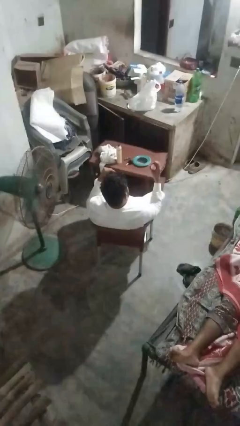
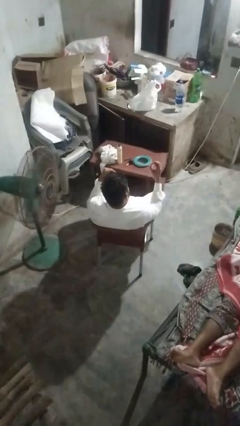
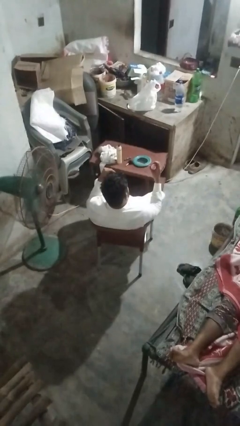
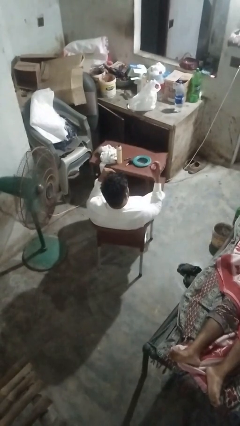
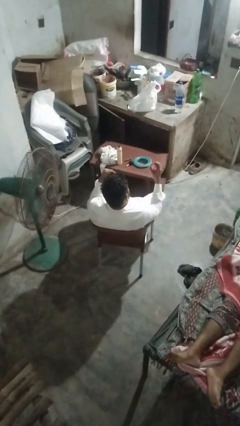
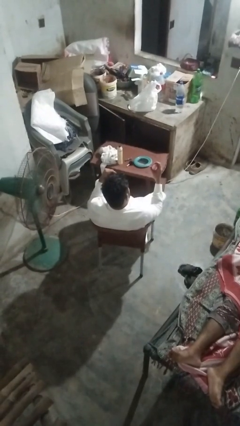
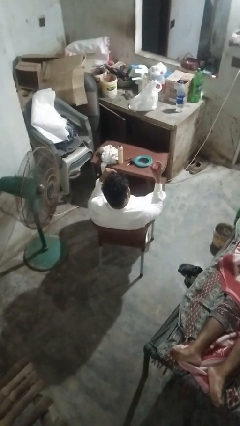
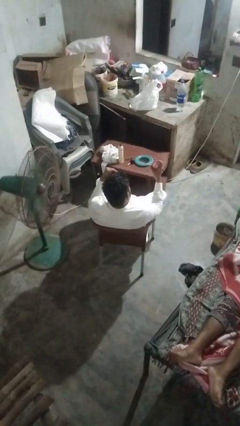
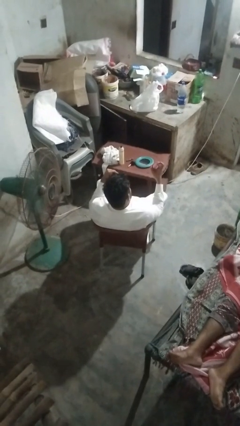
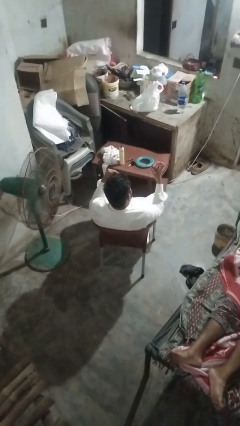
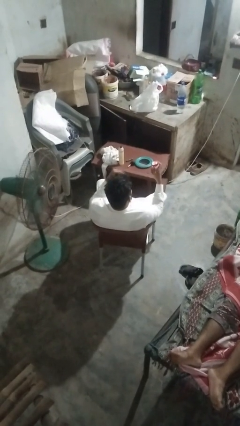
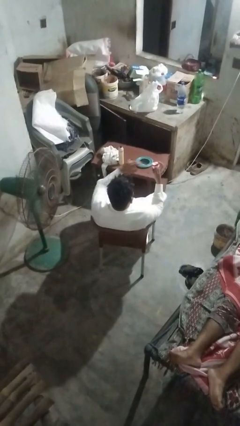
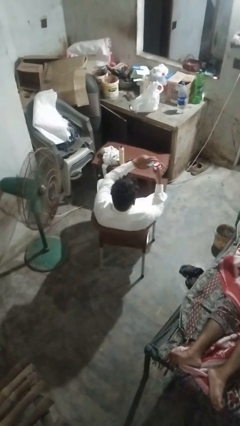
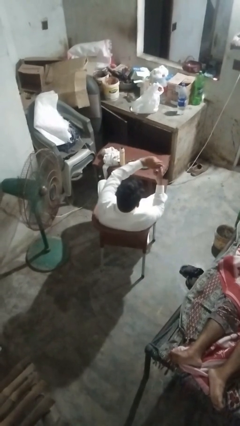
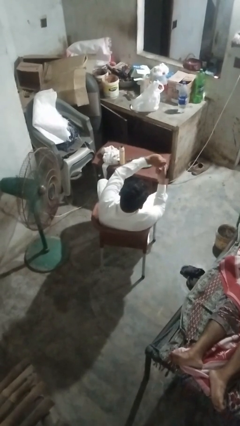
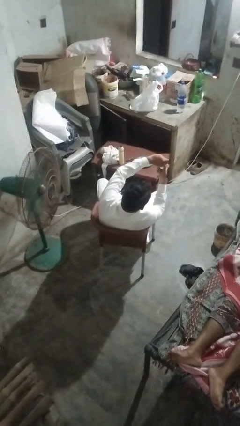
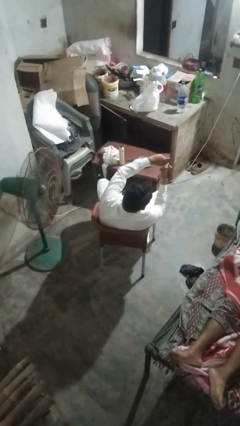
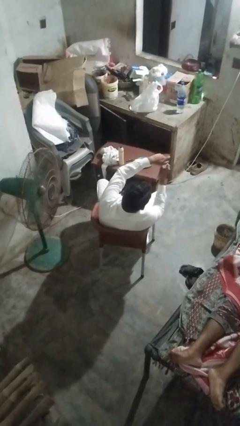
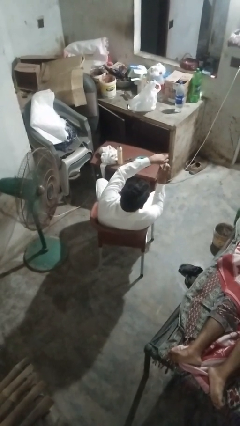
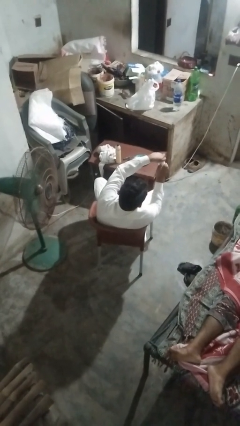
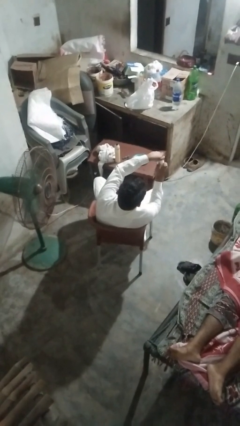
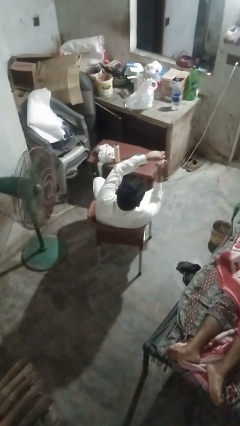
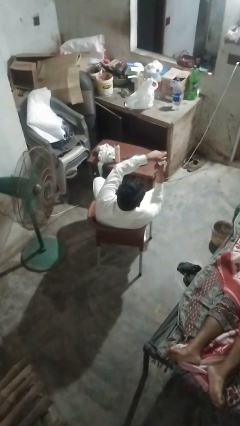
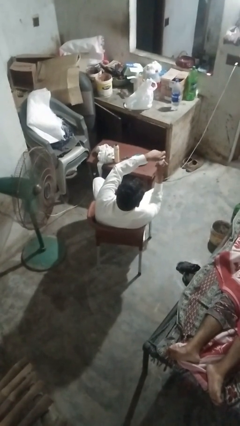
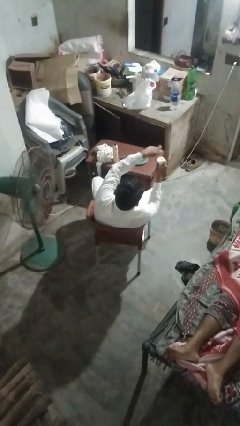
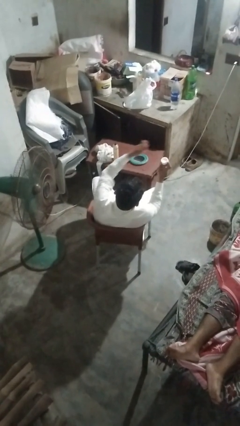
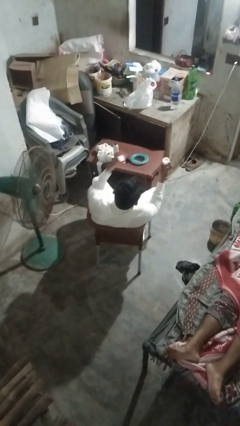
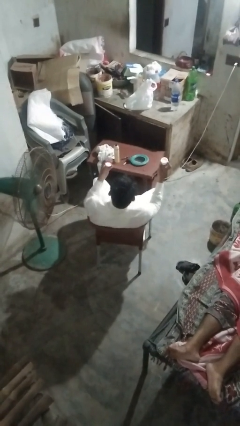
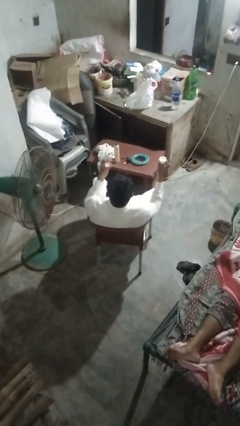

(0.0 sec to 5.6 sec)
person opens jar

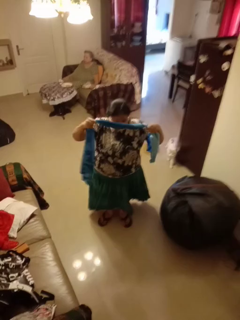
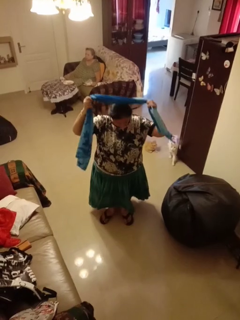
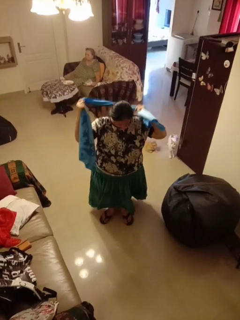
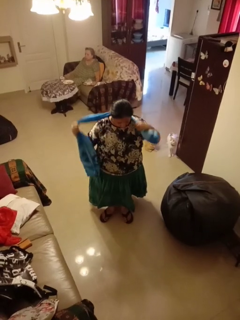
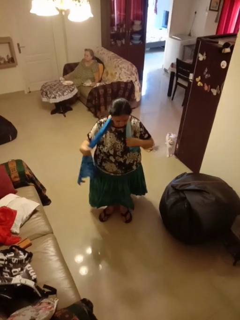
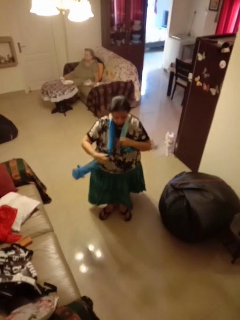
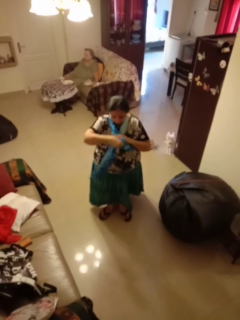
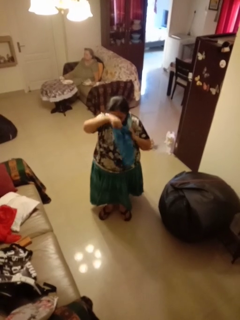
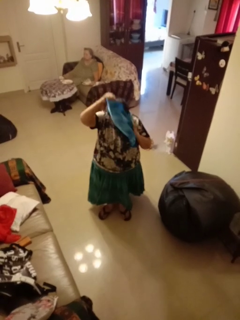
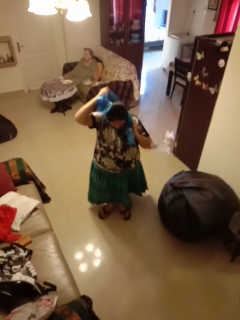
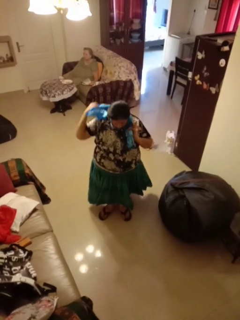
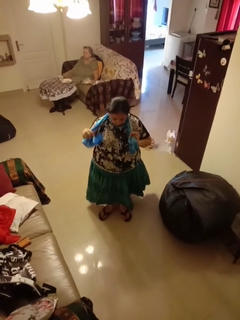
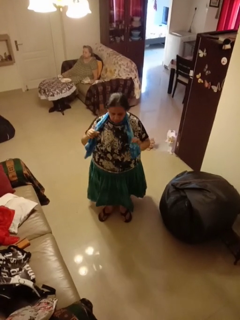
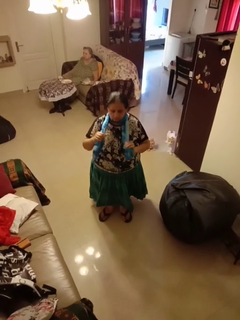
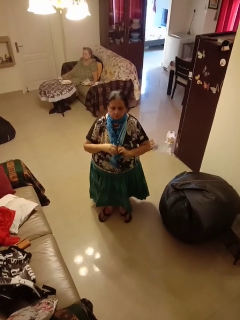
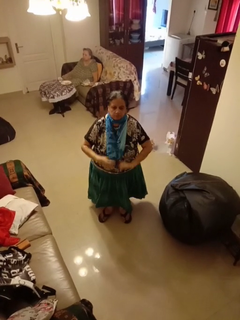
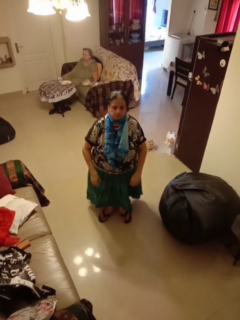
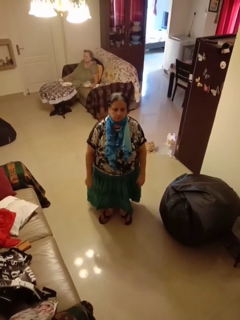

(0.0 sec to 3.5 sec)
person puts on scarf

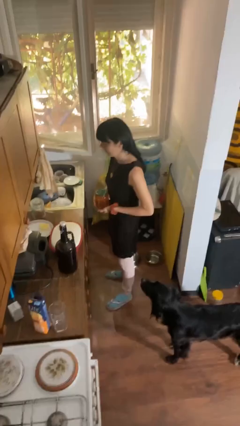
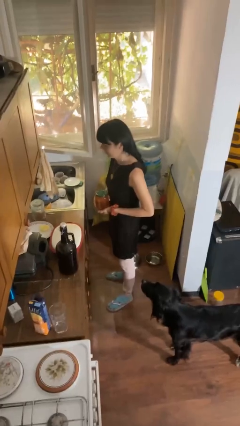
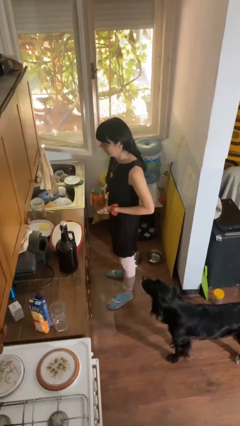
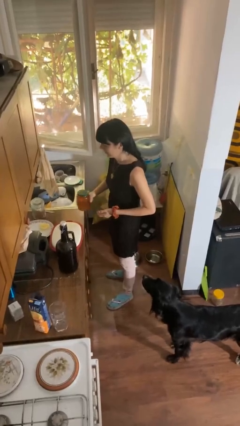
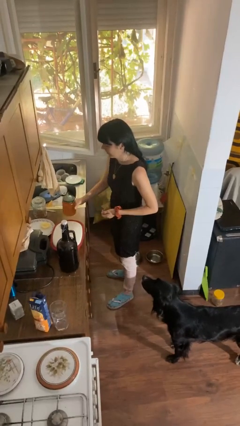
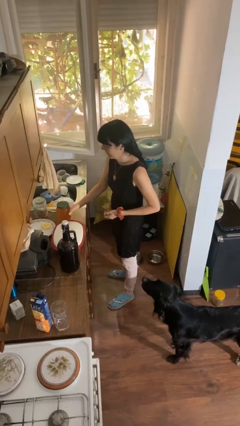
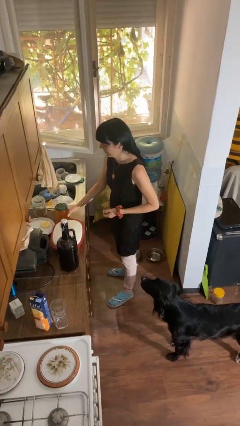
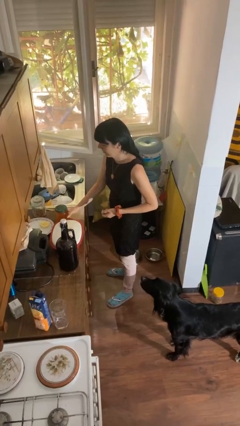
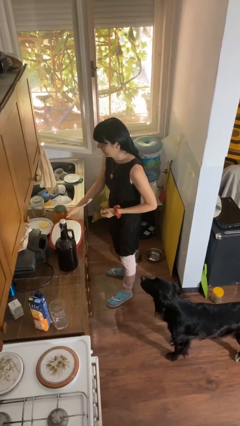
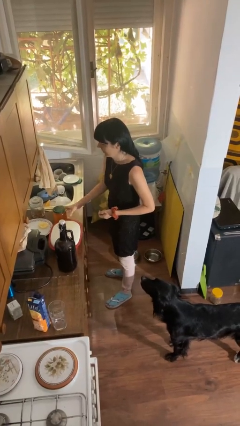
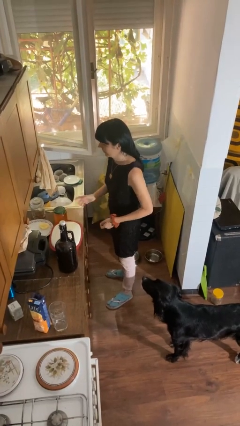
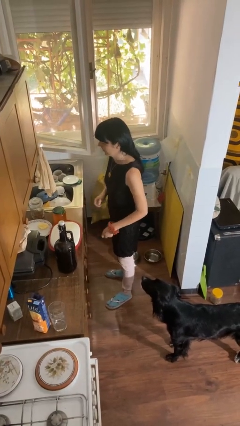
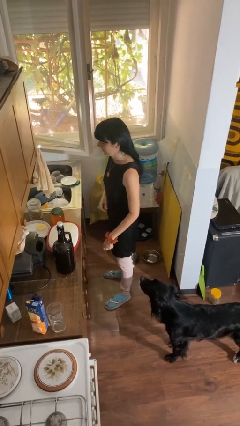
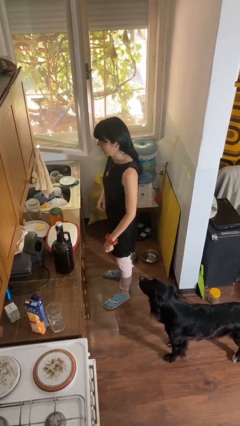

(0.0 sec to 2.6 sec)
person puts down object on countertop

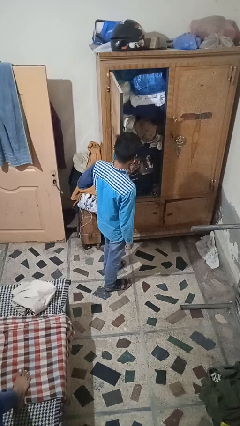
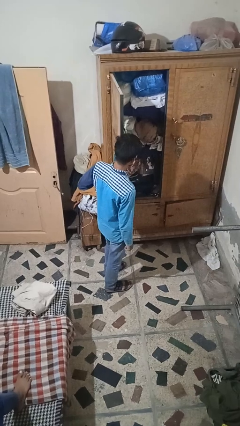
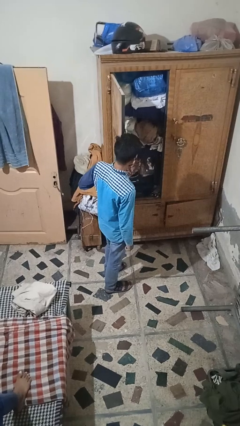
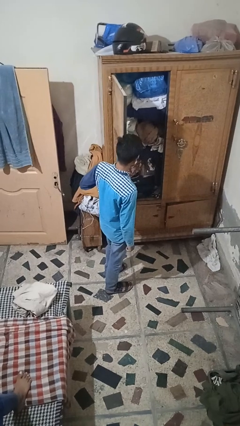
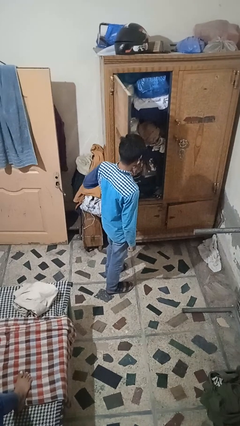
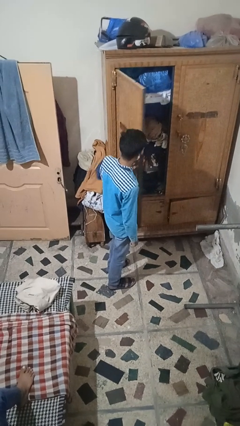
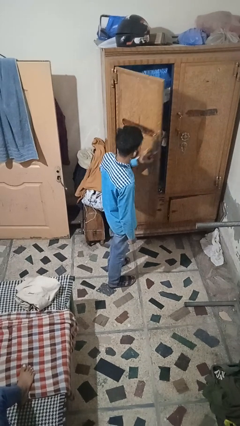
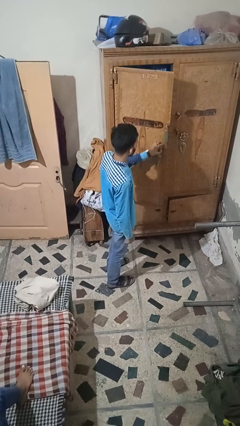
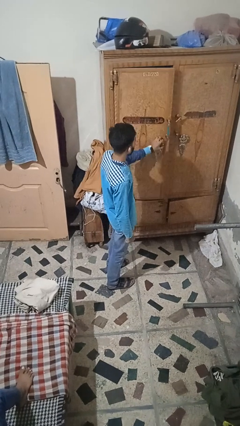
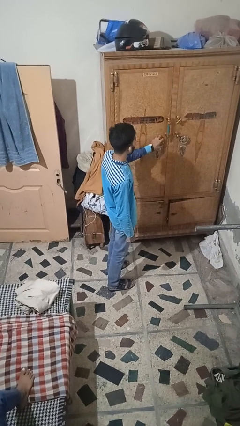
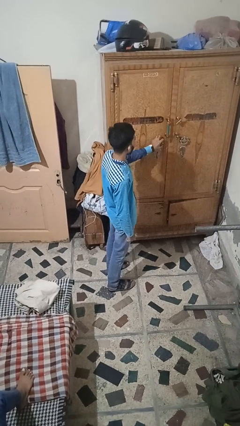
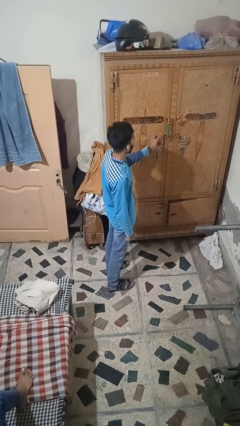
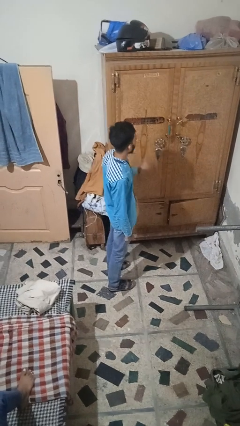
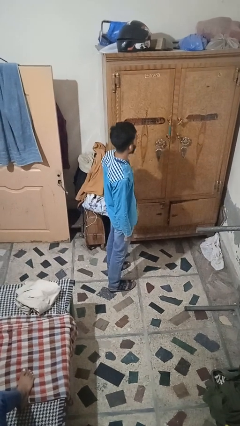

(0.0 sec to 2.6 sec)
person closes closet door

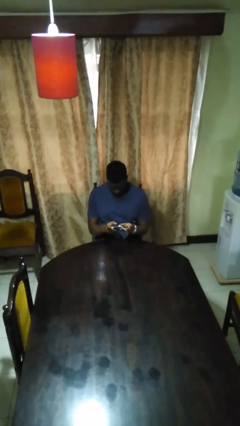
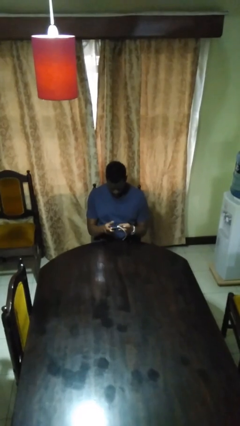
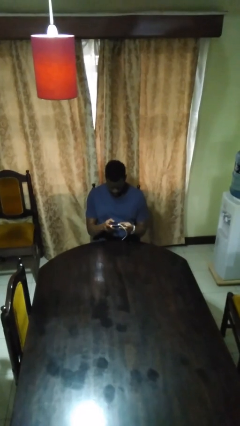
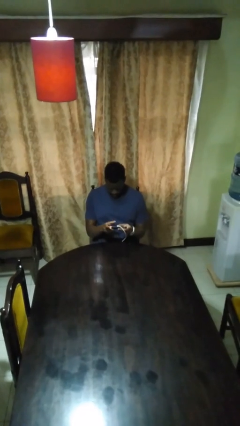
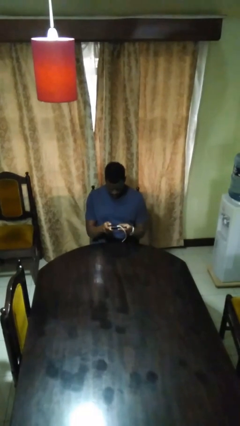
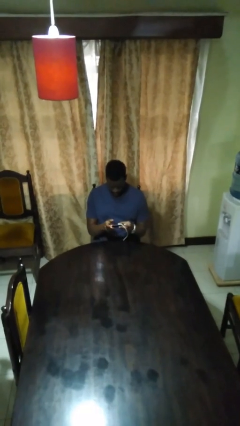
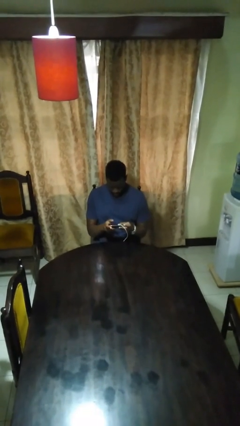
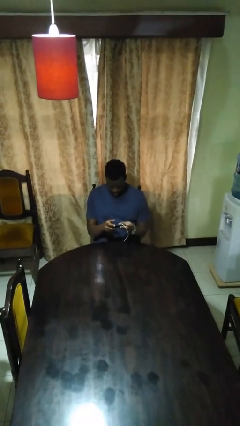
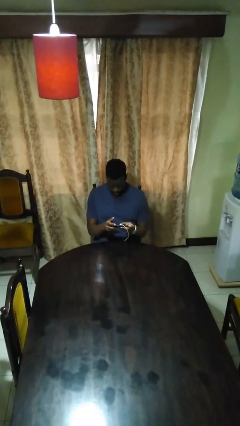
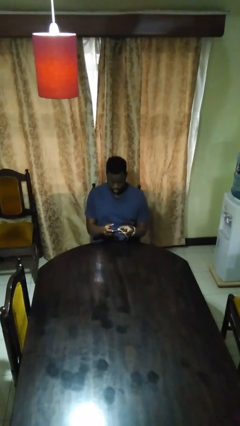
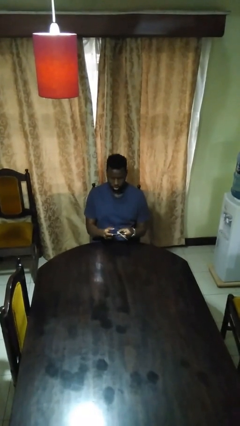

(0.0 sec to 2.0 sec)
person interacts with handheld game

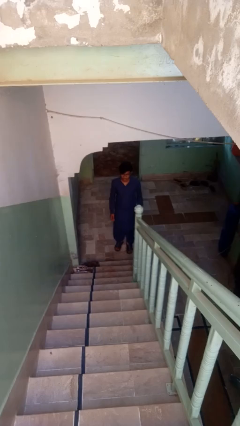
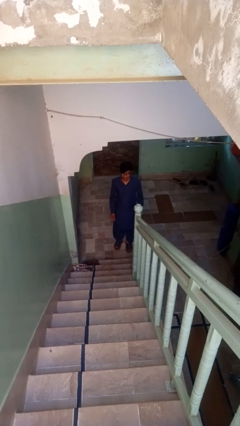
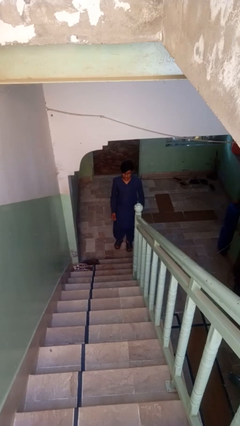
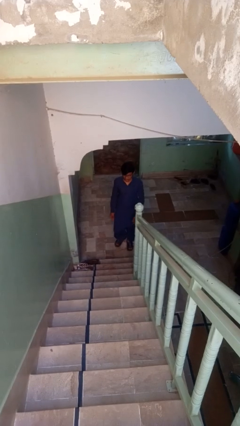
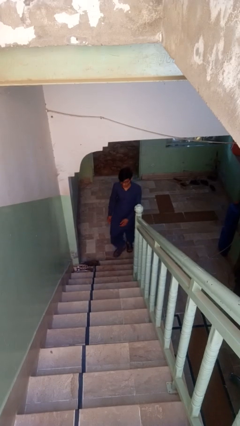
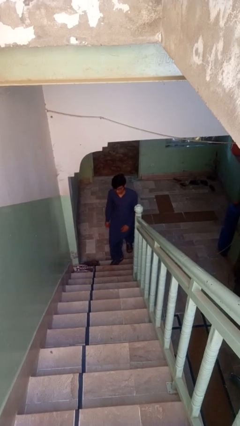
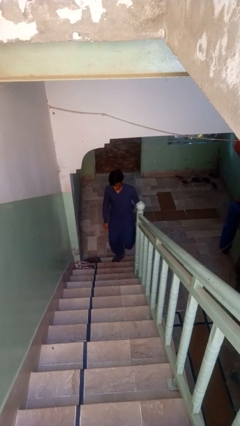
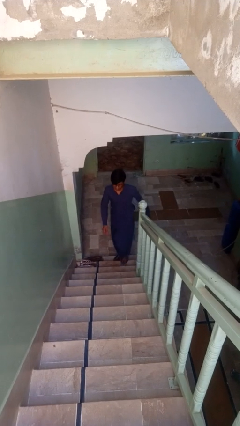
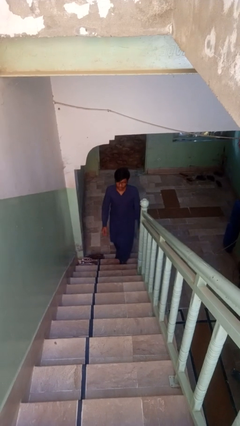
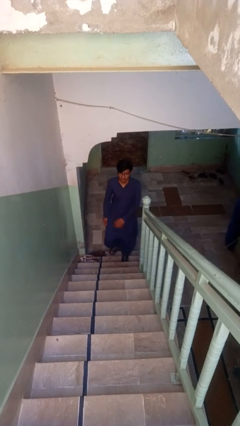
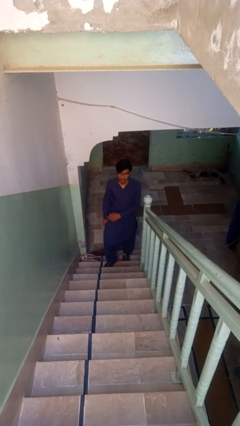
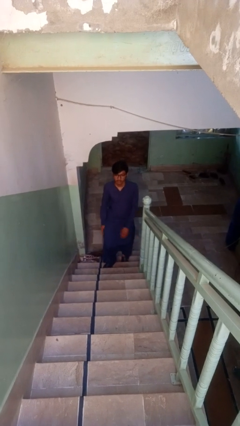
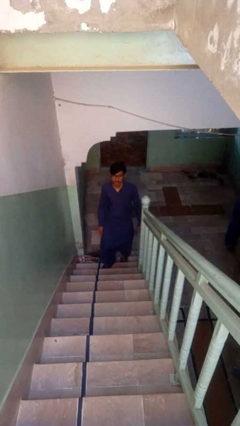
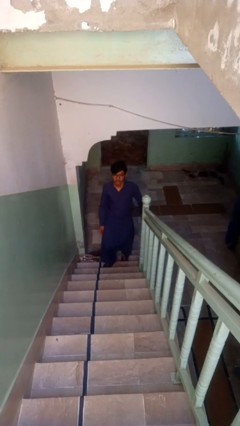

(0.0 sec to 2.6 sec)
person climbs up stairs
